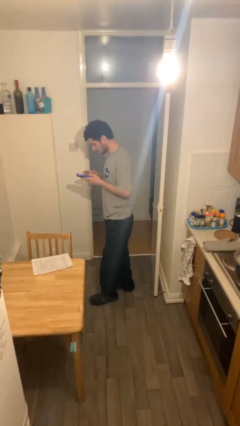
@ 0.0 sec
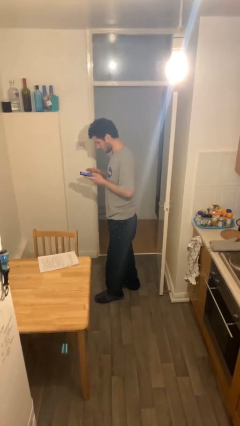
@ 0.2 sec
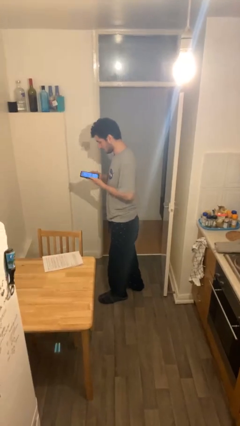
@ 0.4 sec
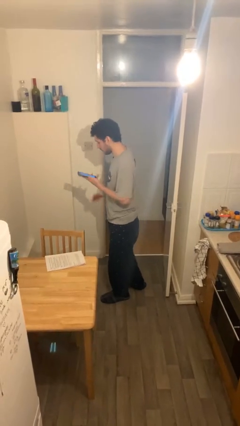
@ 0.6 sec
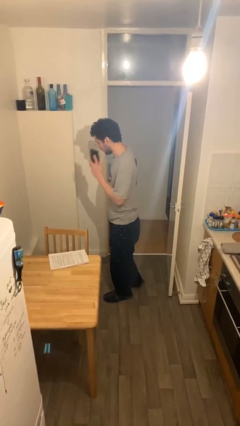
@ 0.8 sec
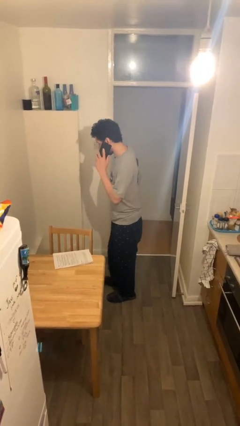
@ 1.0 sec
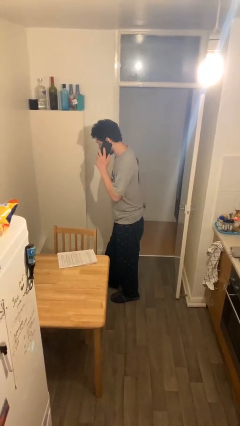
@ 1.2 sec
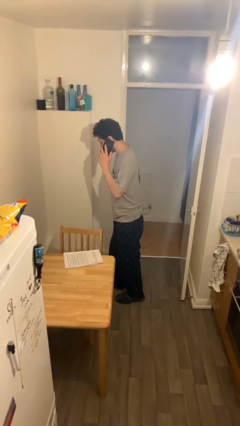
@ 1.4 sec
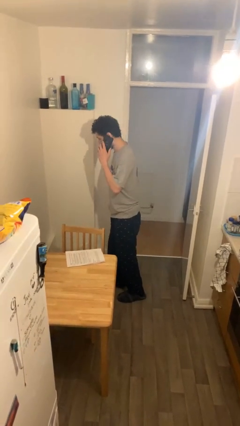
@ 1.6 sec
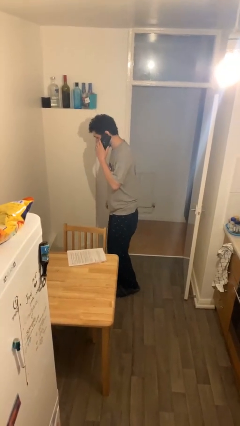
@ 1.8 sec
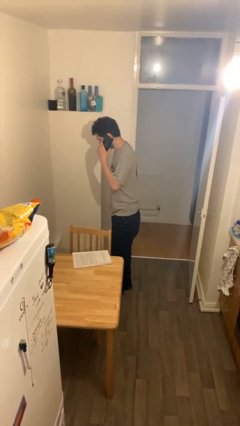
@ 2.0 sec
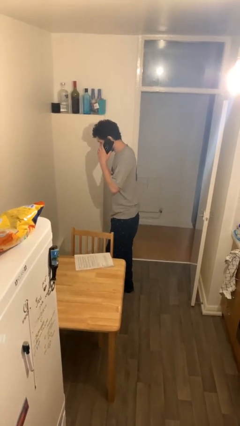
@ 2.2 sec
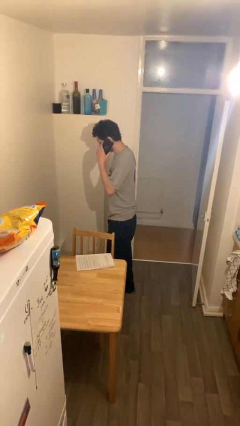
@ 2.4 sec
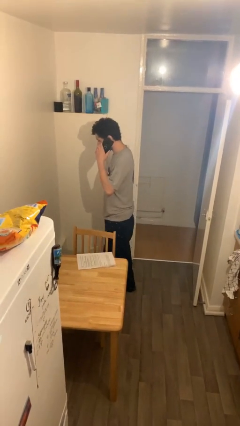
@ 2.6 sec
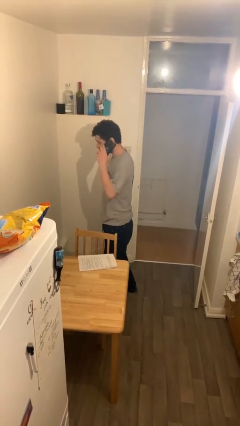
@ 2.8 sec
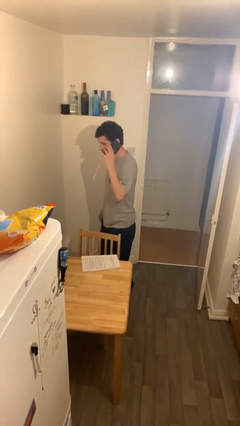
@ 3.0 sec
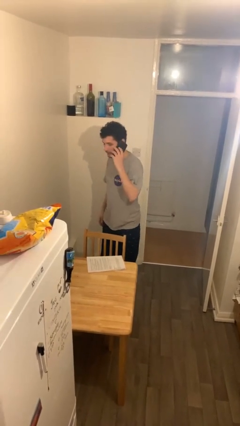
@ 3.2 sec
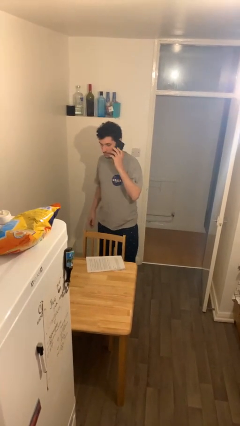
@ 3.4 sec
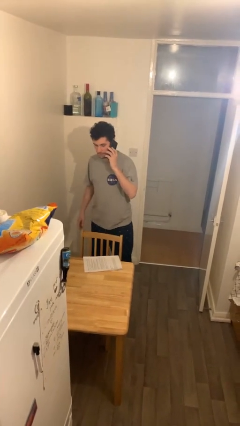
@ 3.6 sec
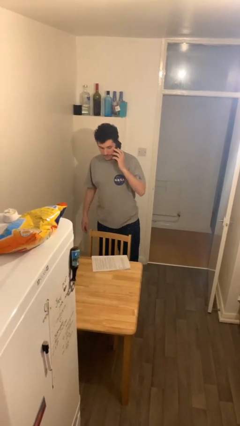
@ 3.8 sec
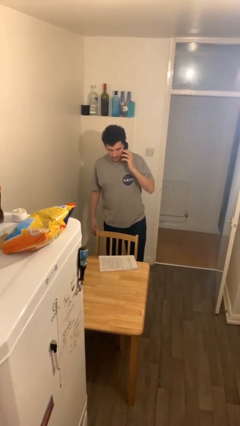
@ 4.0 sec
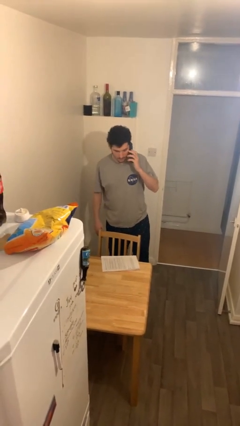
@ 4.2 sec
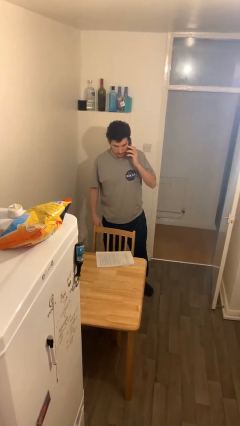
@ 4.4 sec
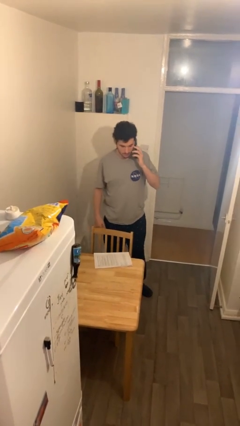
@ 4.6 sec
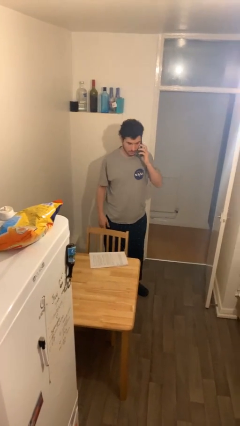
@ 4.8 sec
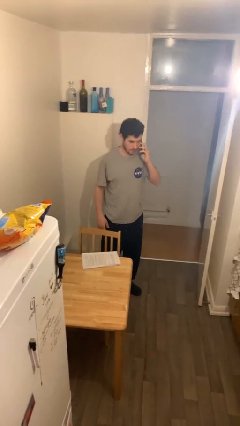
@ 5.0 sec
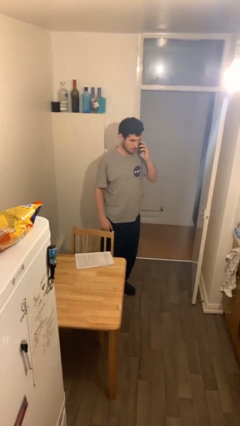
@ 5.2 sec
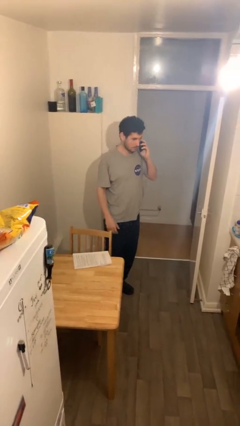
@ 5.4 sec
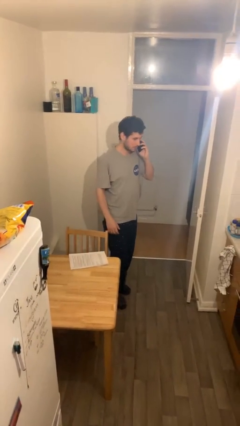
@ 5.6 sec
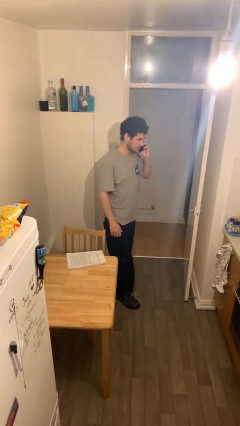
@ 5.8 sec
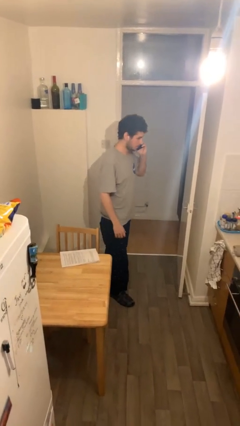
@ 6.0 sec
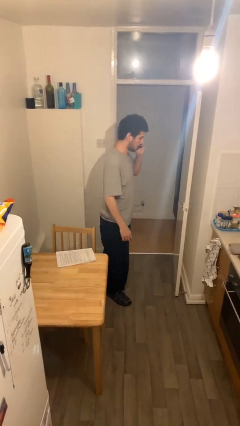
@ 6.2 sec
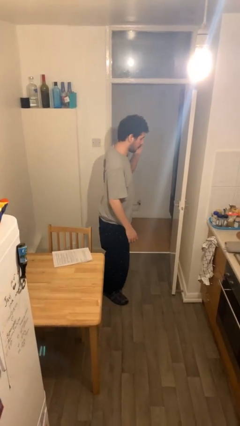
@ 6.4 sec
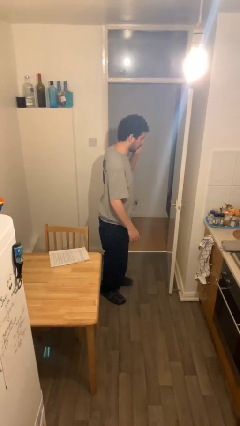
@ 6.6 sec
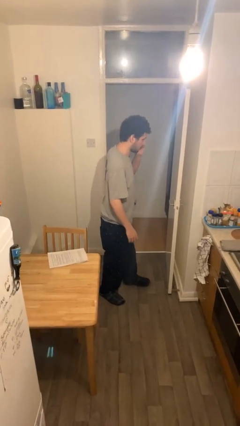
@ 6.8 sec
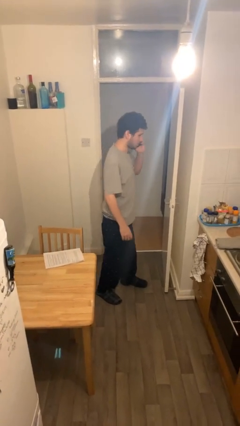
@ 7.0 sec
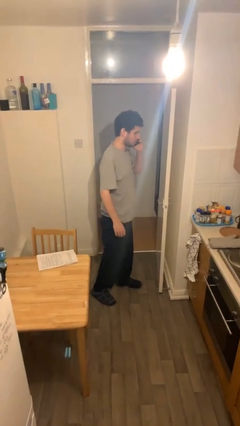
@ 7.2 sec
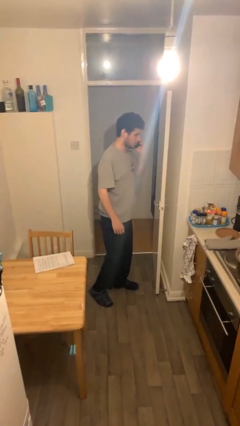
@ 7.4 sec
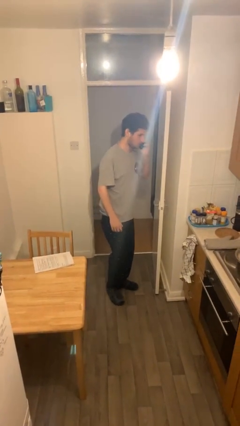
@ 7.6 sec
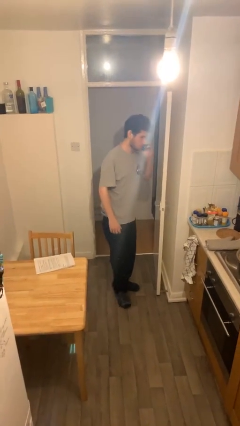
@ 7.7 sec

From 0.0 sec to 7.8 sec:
person talks on phone

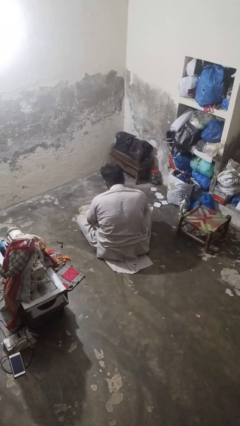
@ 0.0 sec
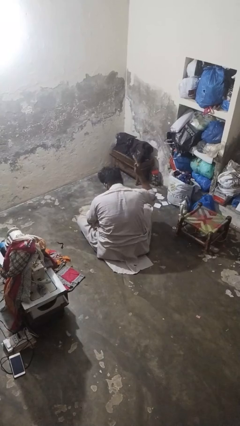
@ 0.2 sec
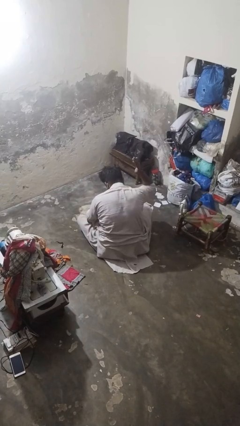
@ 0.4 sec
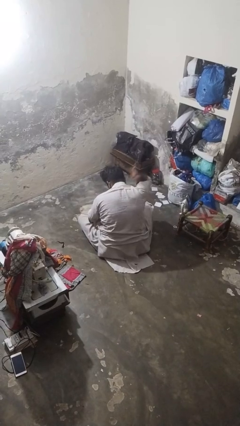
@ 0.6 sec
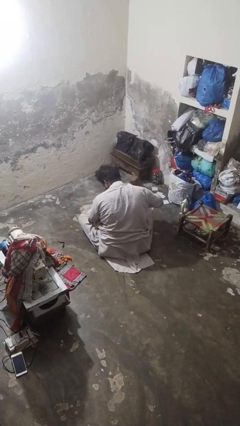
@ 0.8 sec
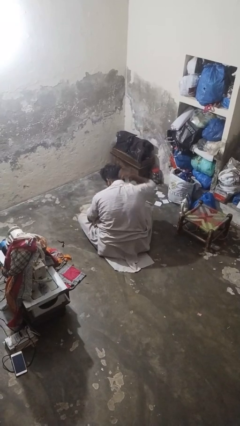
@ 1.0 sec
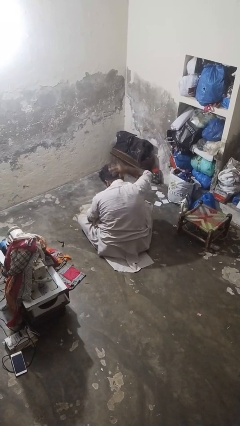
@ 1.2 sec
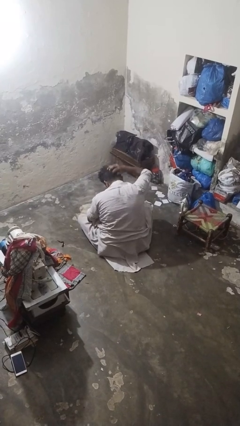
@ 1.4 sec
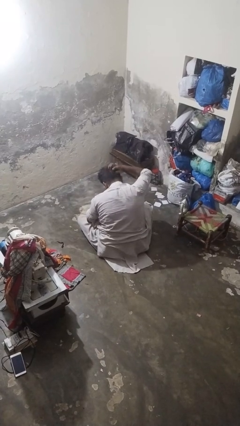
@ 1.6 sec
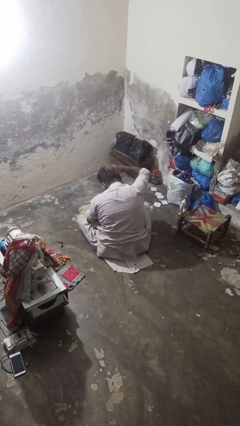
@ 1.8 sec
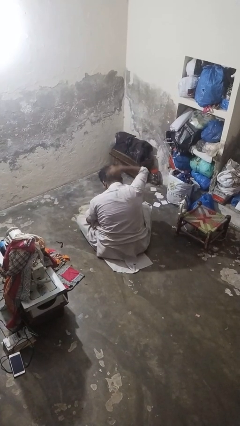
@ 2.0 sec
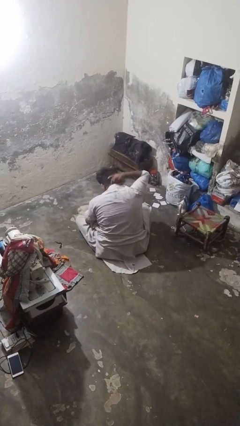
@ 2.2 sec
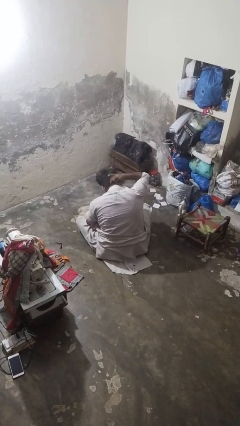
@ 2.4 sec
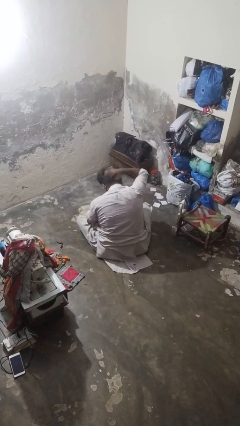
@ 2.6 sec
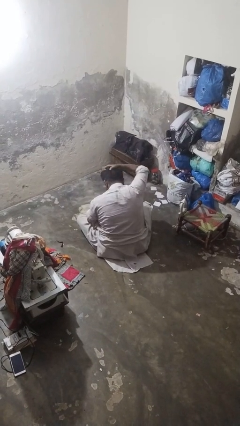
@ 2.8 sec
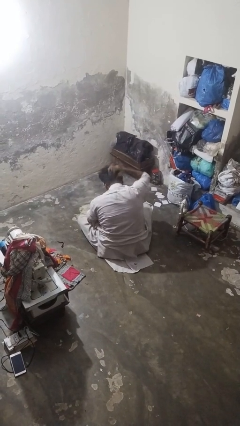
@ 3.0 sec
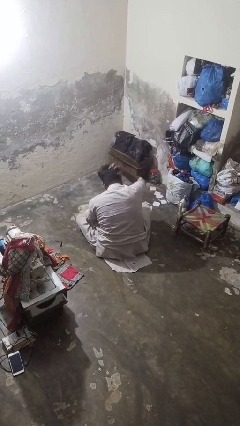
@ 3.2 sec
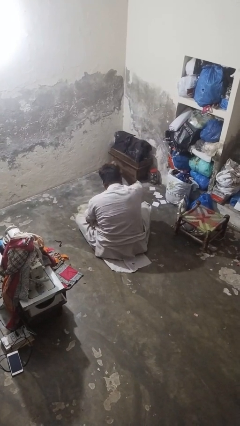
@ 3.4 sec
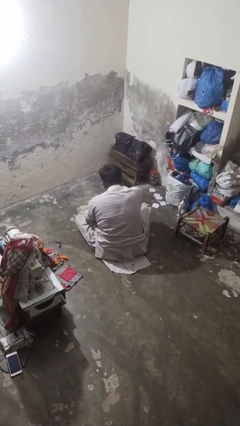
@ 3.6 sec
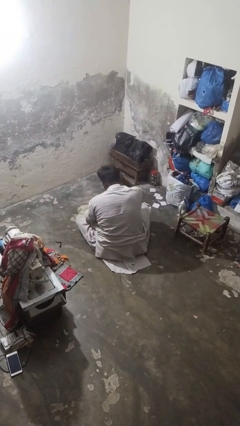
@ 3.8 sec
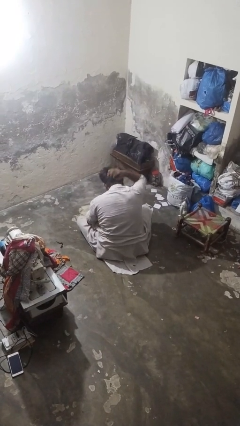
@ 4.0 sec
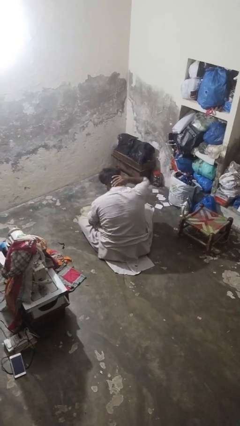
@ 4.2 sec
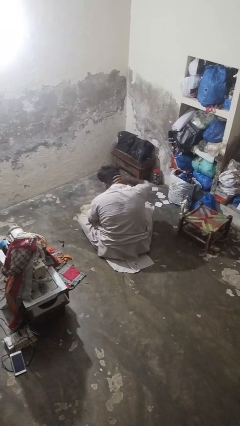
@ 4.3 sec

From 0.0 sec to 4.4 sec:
person swats bug

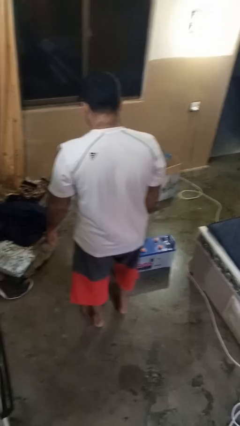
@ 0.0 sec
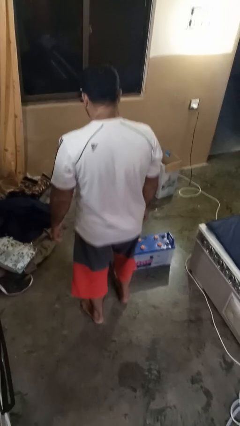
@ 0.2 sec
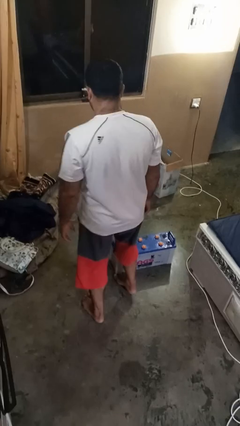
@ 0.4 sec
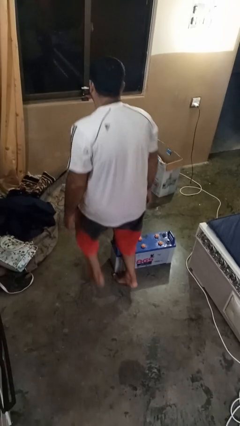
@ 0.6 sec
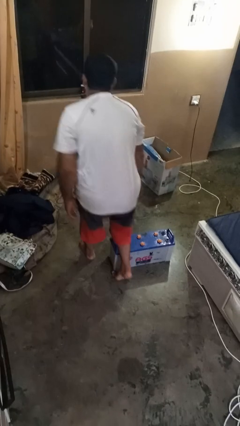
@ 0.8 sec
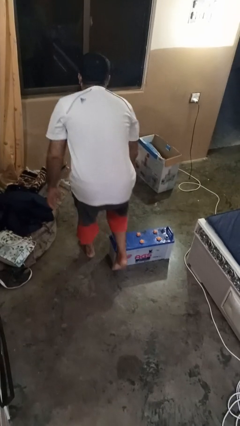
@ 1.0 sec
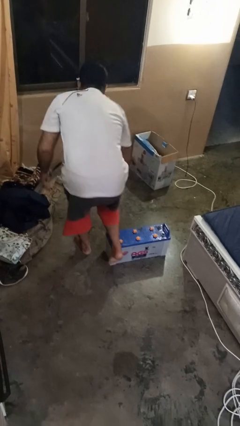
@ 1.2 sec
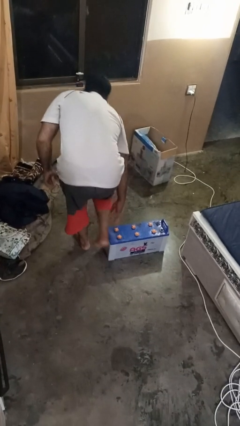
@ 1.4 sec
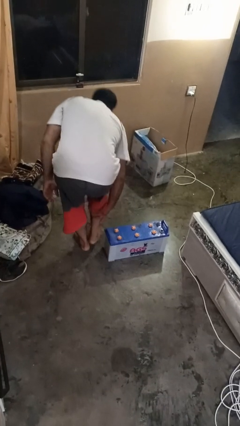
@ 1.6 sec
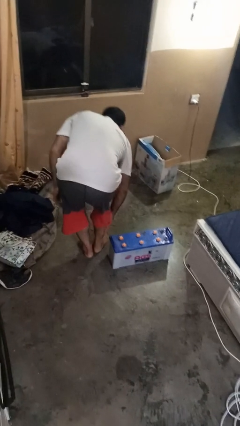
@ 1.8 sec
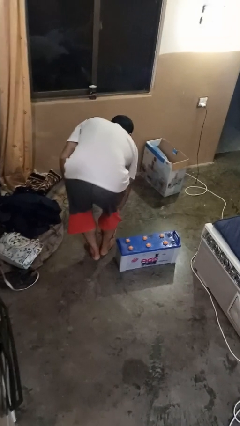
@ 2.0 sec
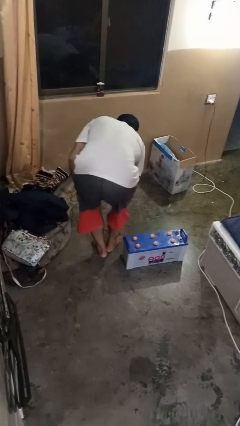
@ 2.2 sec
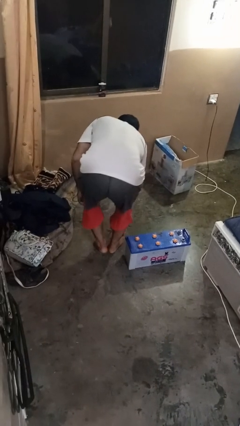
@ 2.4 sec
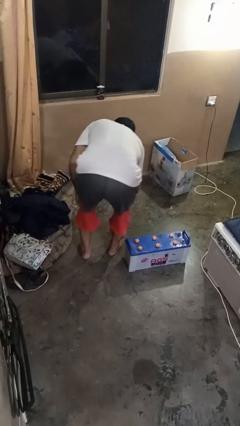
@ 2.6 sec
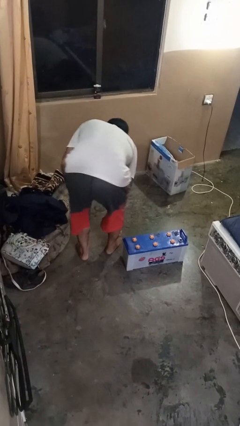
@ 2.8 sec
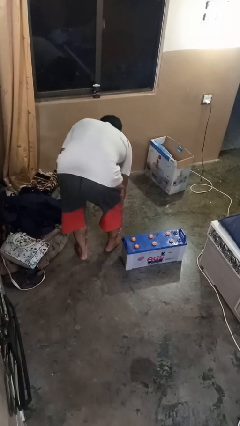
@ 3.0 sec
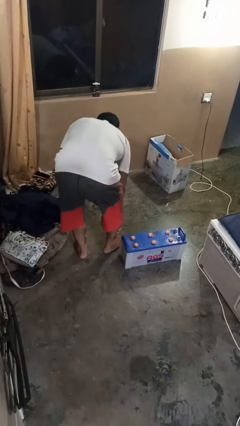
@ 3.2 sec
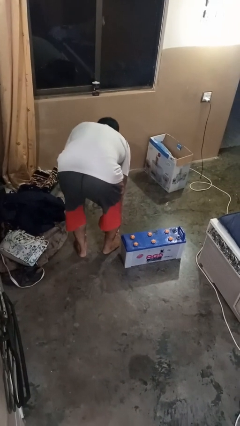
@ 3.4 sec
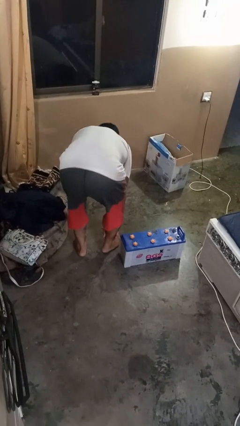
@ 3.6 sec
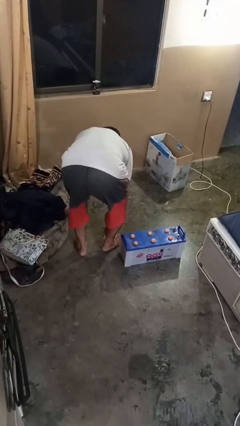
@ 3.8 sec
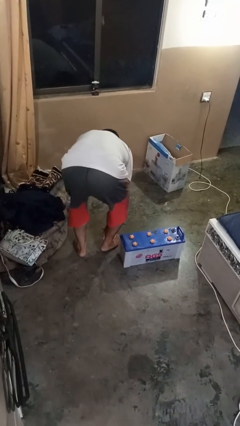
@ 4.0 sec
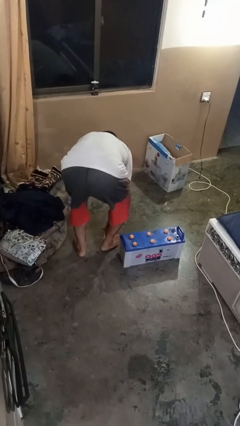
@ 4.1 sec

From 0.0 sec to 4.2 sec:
person trips on object on floor

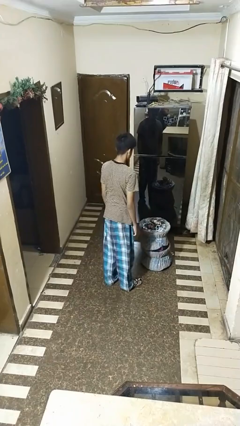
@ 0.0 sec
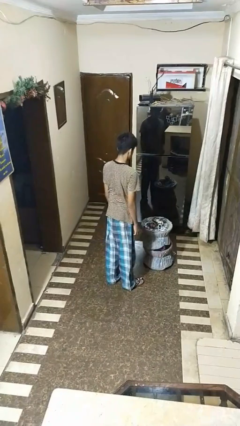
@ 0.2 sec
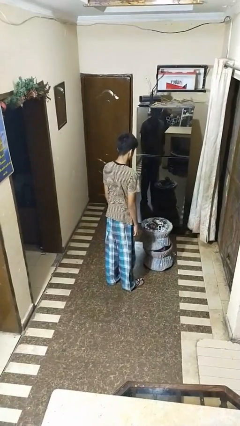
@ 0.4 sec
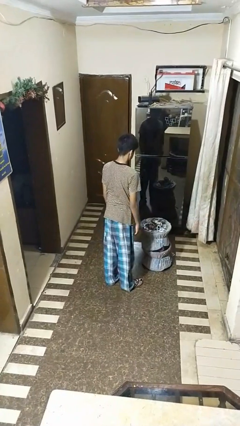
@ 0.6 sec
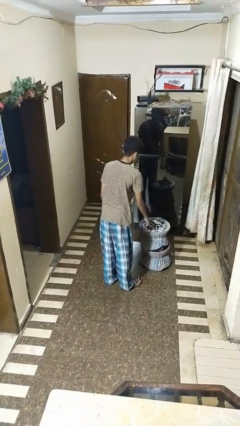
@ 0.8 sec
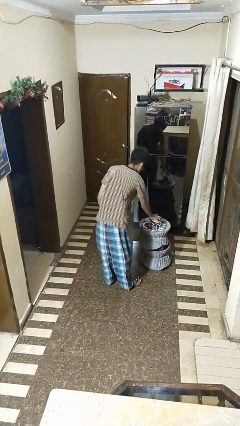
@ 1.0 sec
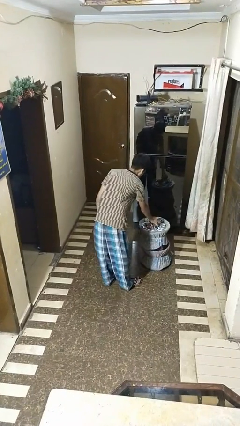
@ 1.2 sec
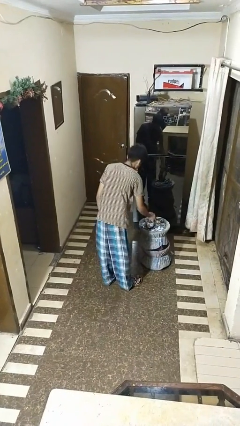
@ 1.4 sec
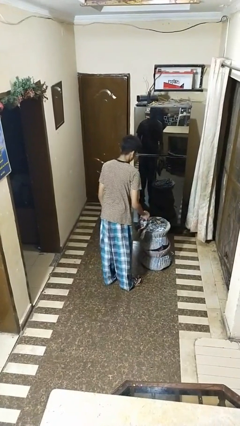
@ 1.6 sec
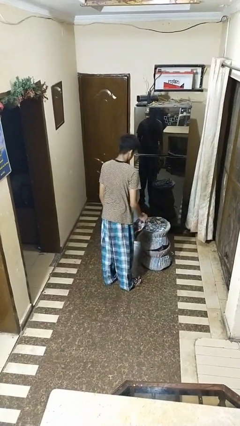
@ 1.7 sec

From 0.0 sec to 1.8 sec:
person takes object from basket
